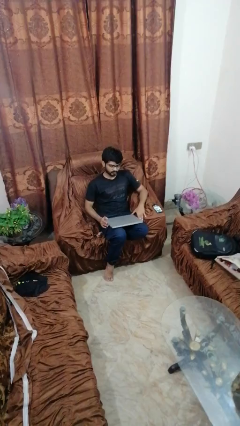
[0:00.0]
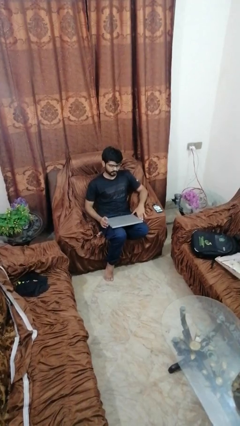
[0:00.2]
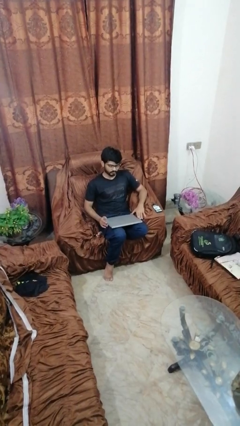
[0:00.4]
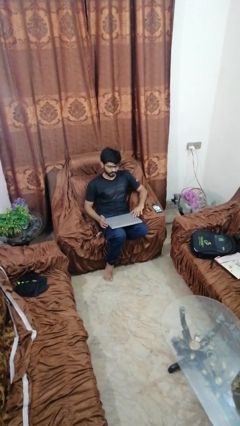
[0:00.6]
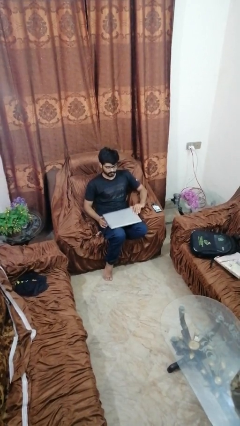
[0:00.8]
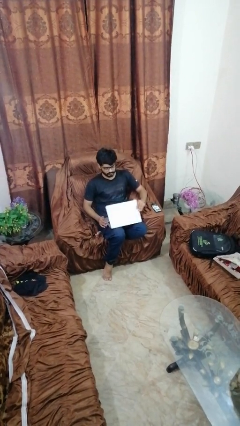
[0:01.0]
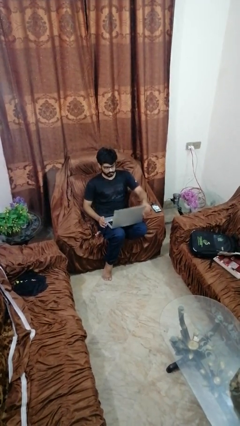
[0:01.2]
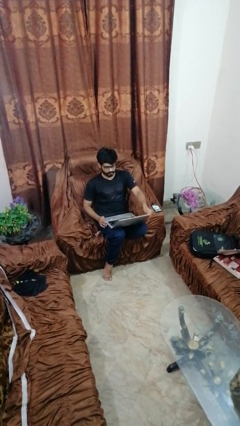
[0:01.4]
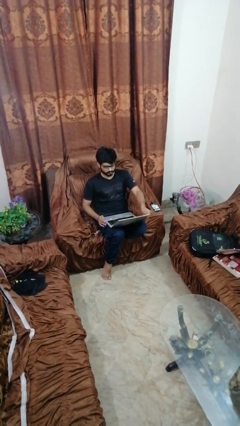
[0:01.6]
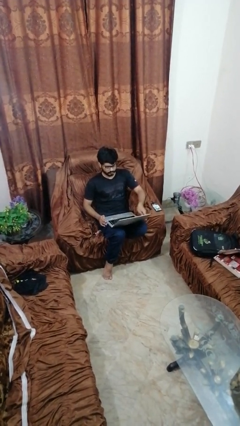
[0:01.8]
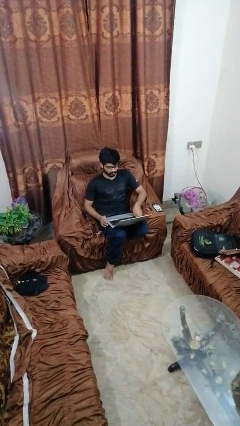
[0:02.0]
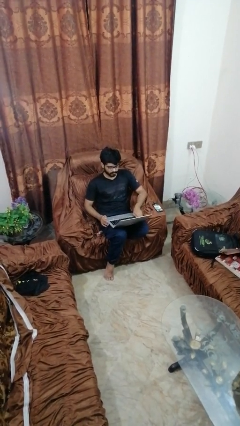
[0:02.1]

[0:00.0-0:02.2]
person opens laptop

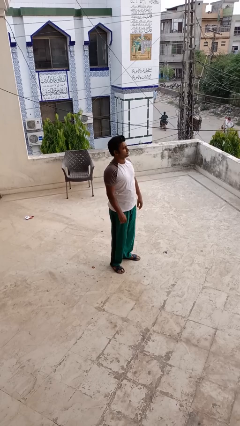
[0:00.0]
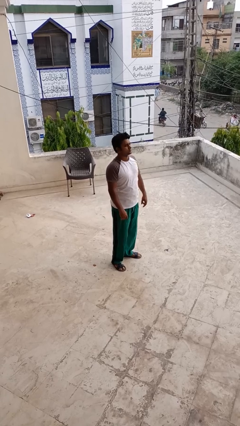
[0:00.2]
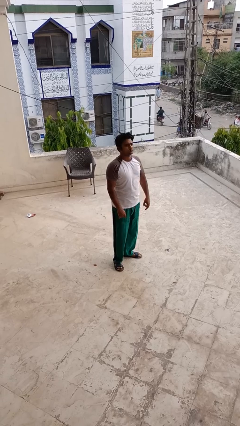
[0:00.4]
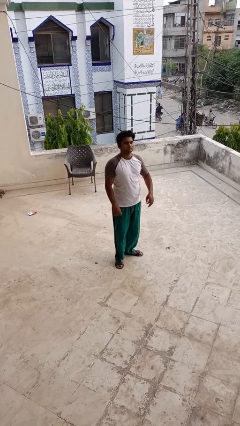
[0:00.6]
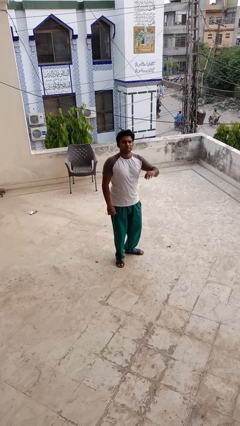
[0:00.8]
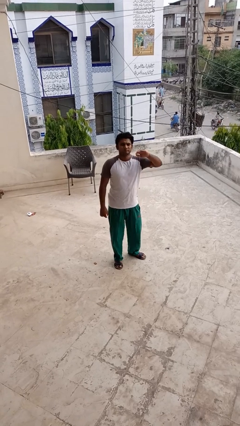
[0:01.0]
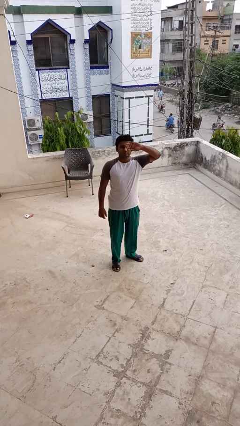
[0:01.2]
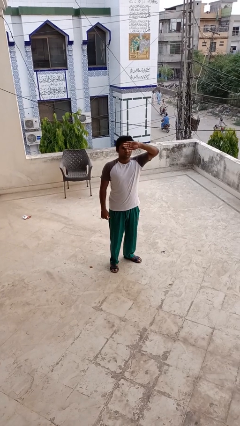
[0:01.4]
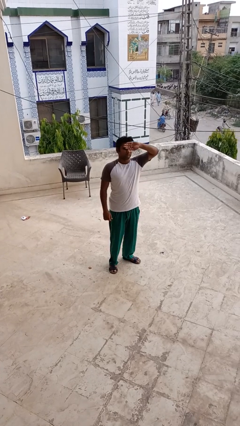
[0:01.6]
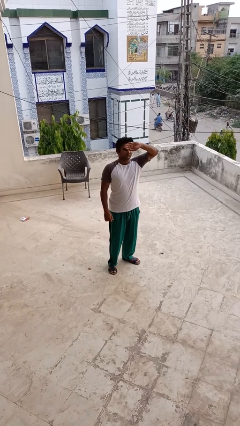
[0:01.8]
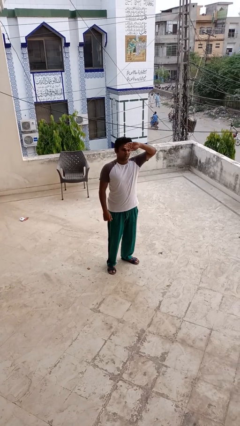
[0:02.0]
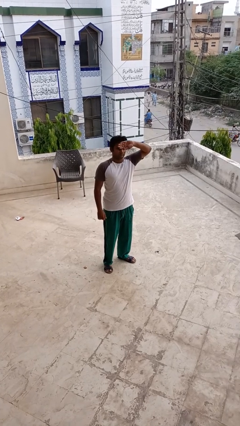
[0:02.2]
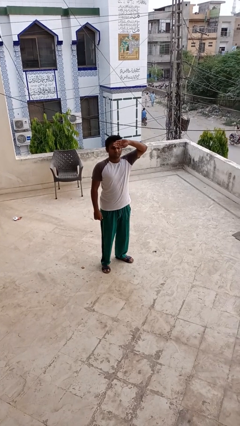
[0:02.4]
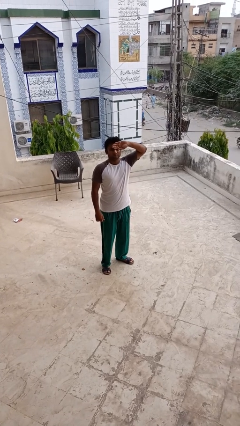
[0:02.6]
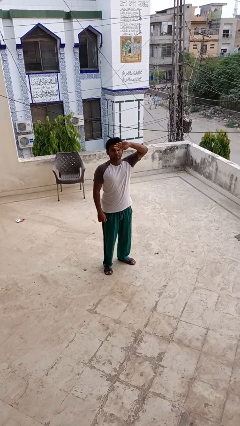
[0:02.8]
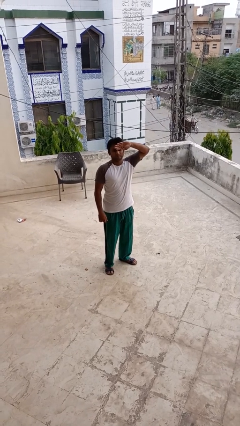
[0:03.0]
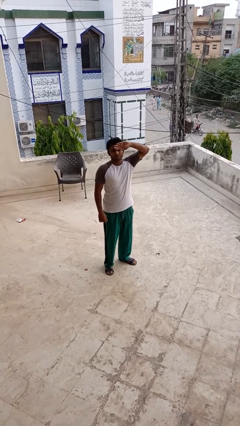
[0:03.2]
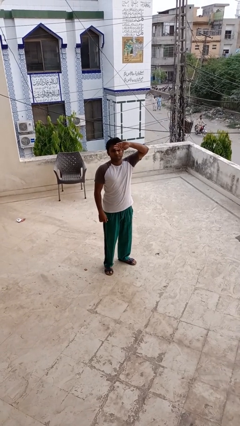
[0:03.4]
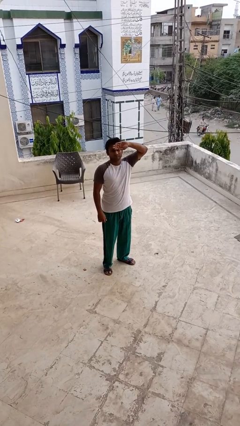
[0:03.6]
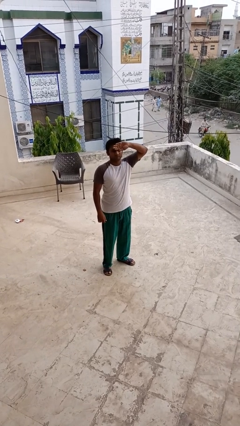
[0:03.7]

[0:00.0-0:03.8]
person shades eyes

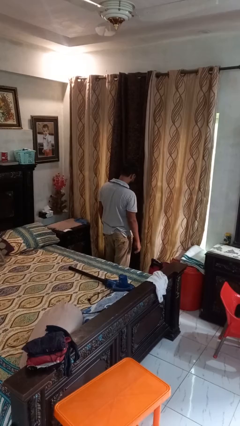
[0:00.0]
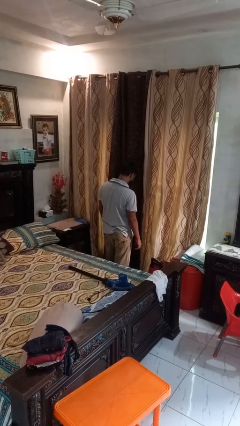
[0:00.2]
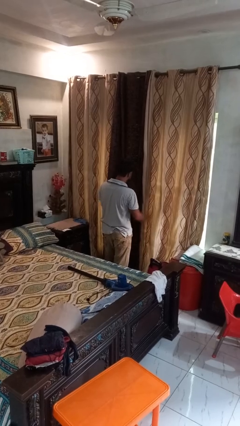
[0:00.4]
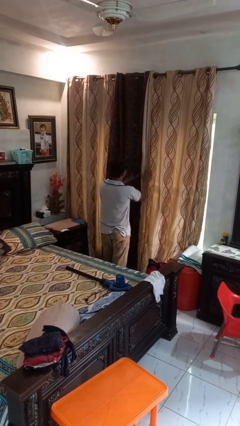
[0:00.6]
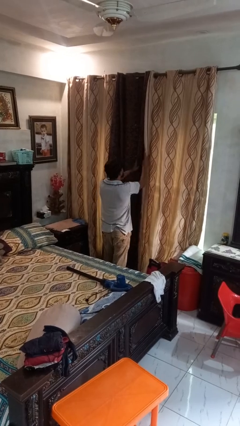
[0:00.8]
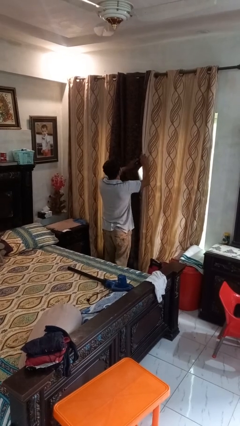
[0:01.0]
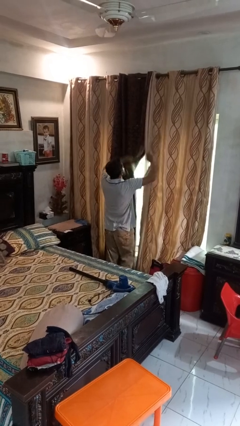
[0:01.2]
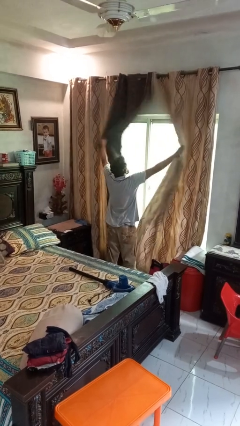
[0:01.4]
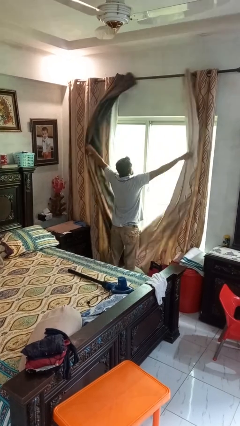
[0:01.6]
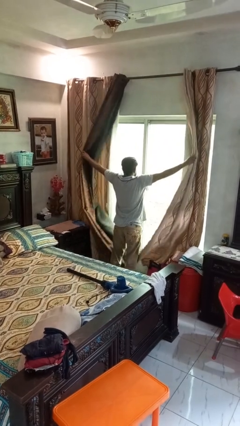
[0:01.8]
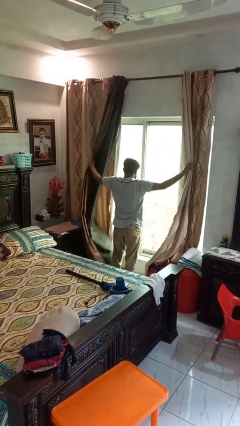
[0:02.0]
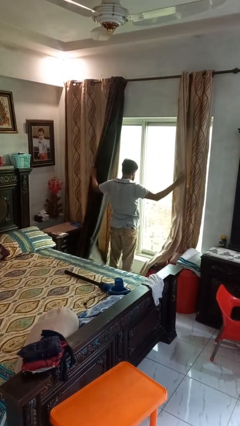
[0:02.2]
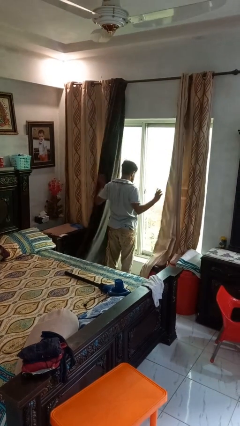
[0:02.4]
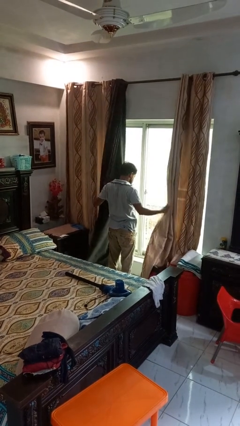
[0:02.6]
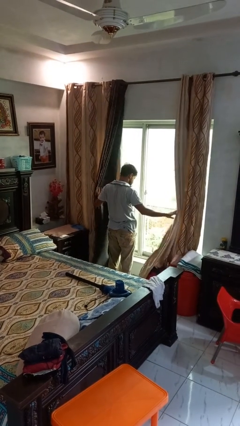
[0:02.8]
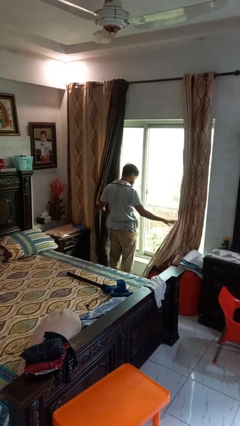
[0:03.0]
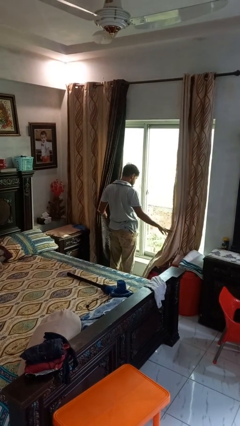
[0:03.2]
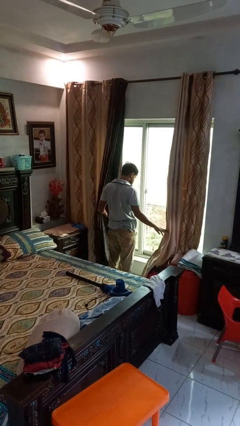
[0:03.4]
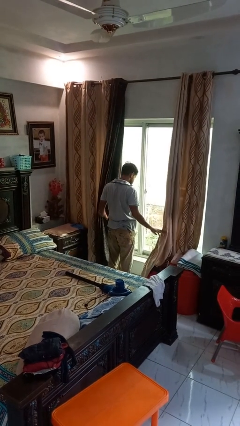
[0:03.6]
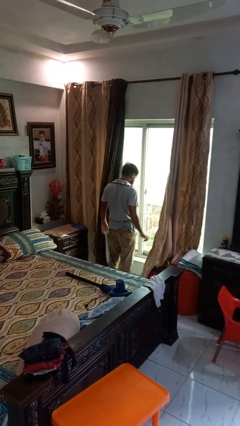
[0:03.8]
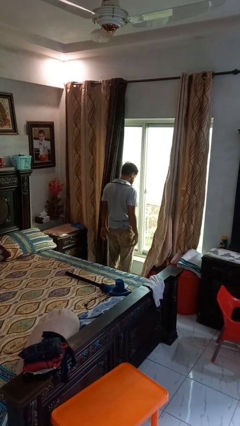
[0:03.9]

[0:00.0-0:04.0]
person opens curtains

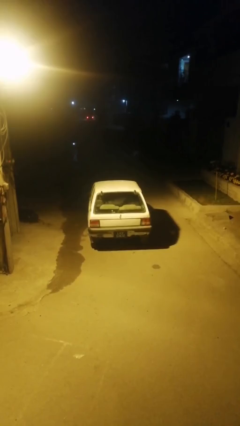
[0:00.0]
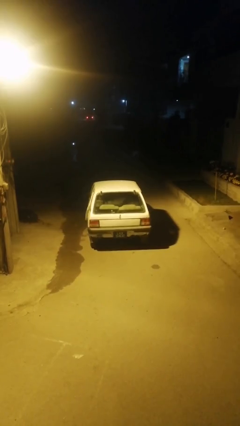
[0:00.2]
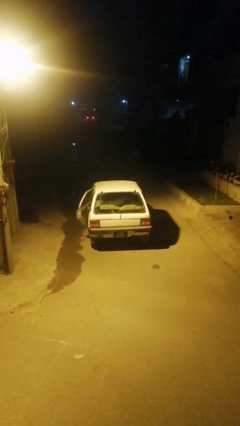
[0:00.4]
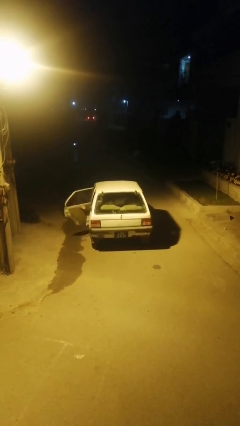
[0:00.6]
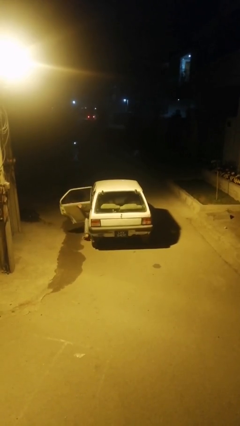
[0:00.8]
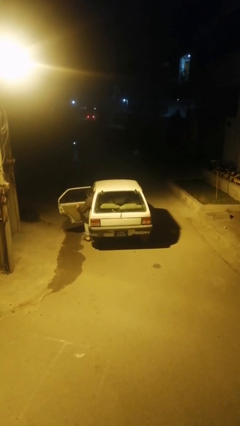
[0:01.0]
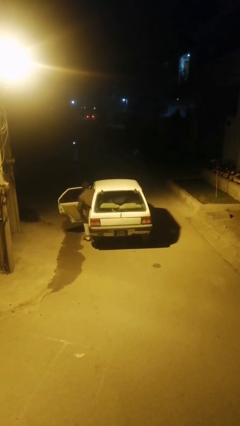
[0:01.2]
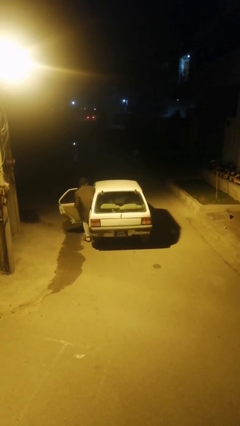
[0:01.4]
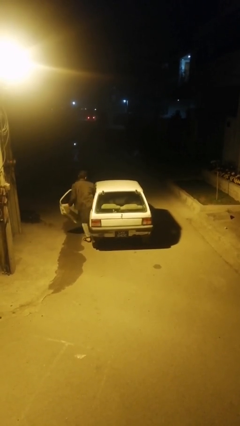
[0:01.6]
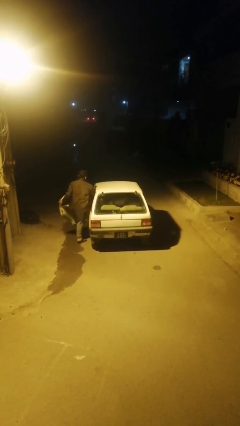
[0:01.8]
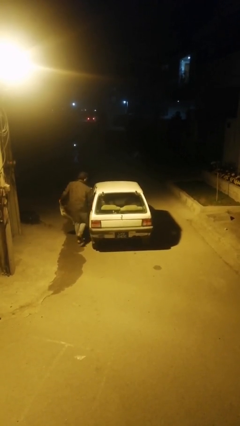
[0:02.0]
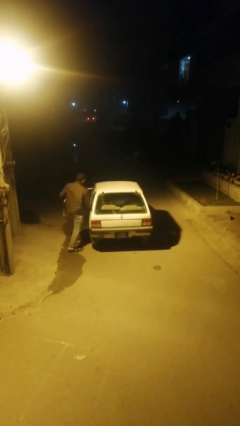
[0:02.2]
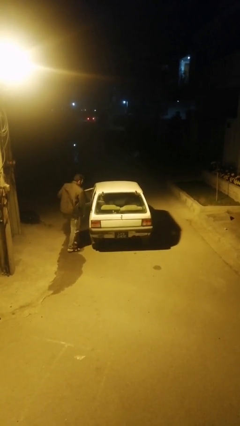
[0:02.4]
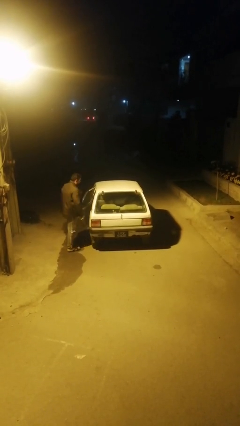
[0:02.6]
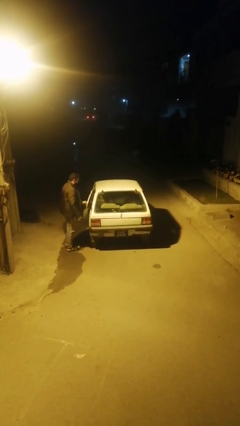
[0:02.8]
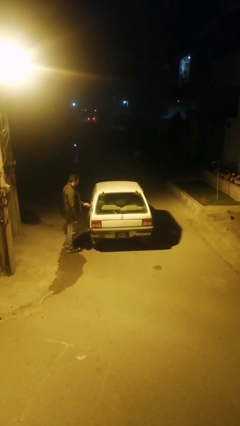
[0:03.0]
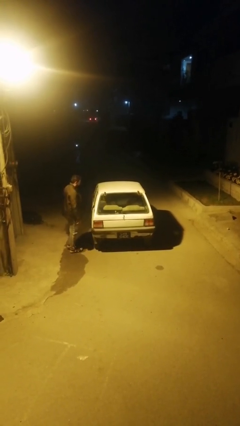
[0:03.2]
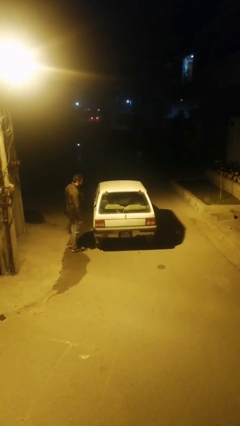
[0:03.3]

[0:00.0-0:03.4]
car drops off person

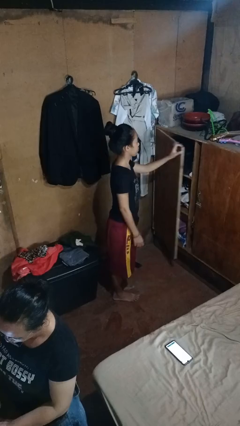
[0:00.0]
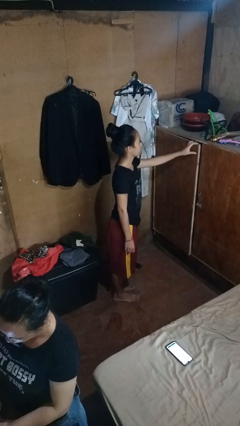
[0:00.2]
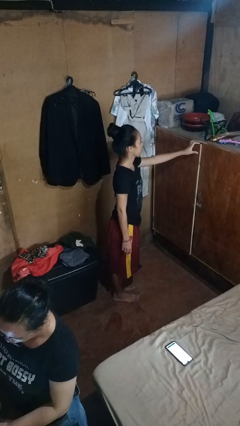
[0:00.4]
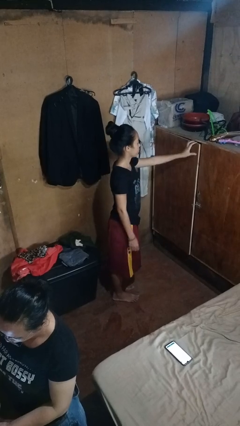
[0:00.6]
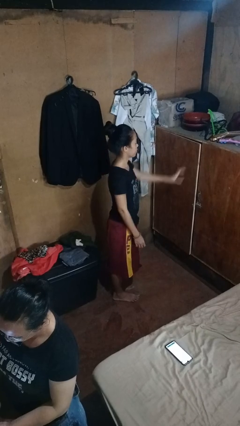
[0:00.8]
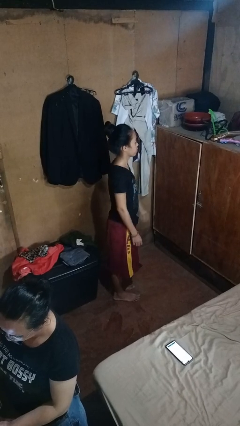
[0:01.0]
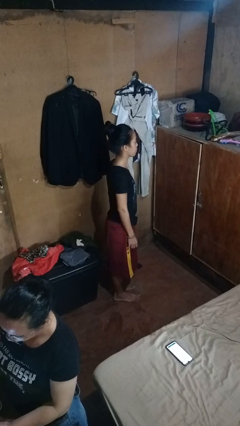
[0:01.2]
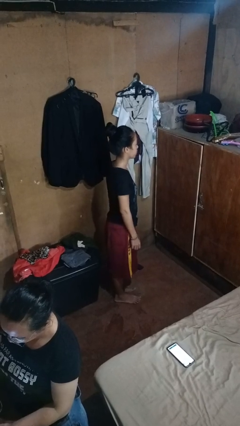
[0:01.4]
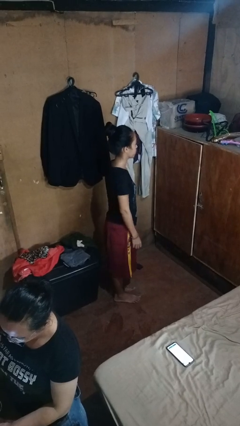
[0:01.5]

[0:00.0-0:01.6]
person closes closet door

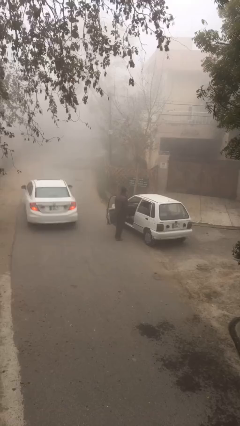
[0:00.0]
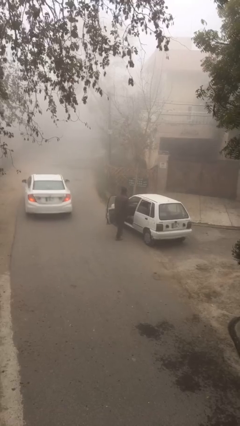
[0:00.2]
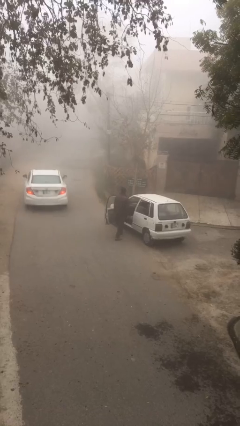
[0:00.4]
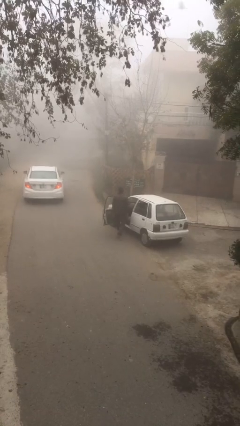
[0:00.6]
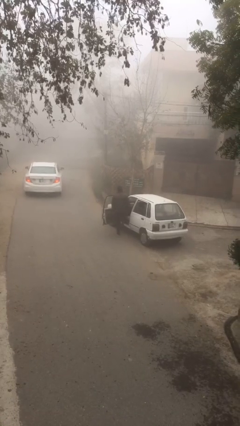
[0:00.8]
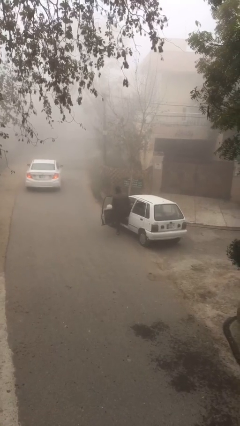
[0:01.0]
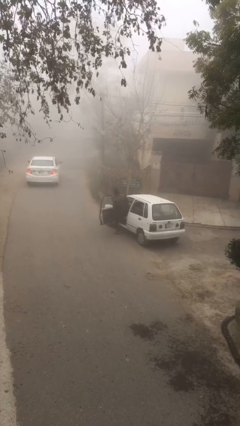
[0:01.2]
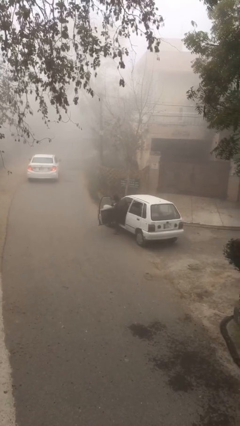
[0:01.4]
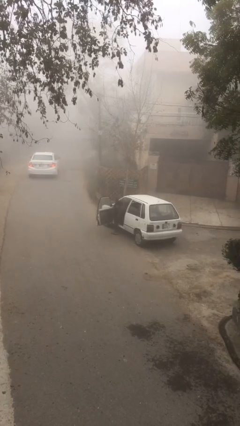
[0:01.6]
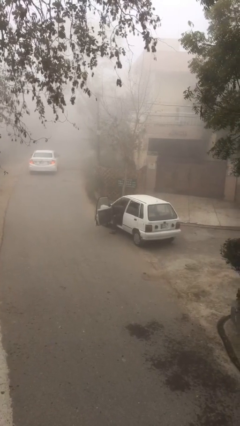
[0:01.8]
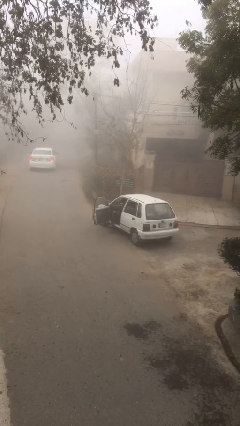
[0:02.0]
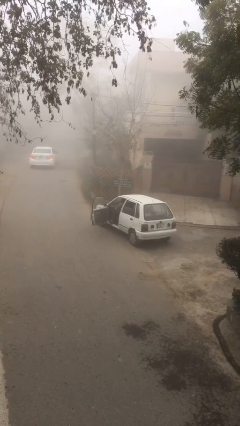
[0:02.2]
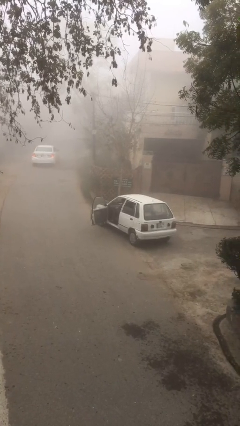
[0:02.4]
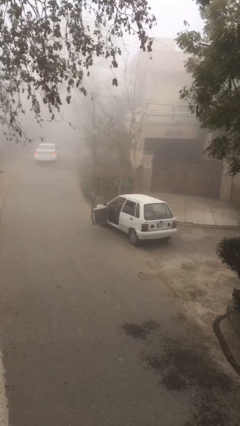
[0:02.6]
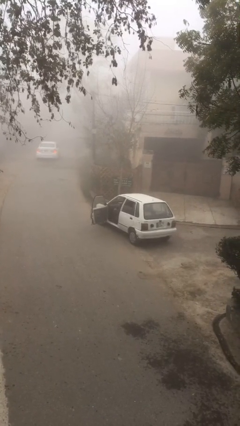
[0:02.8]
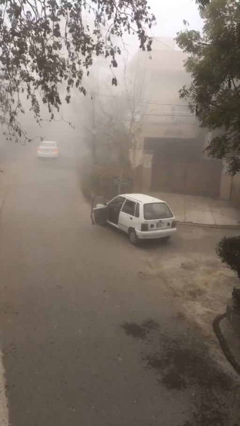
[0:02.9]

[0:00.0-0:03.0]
person enters car
